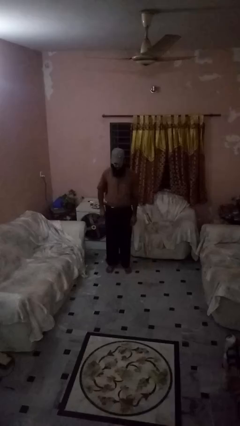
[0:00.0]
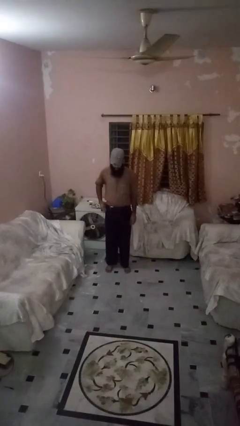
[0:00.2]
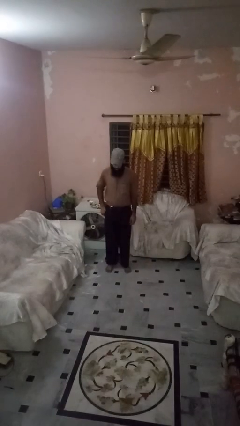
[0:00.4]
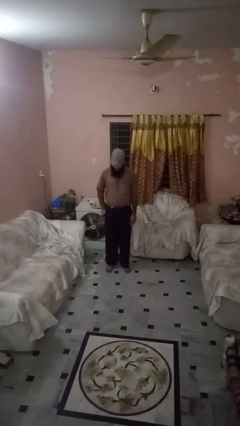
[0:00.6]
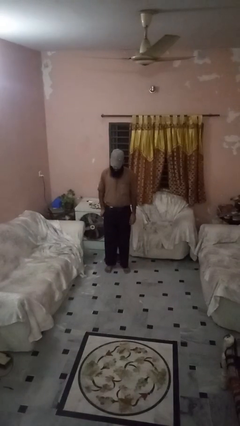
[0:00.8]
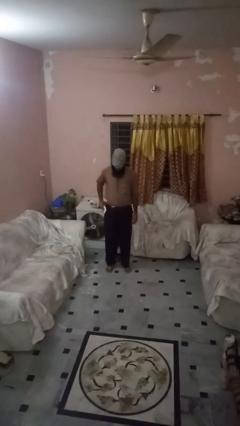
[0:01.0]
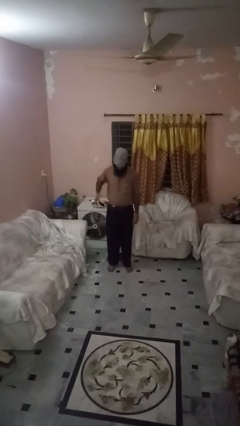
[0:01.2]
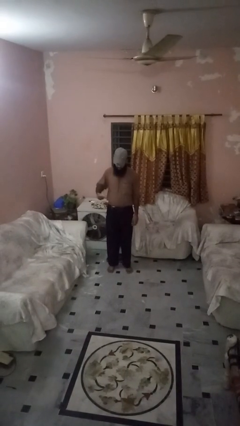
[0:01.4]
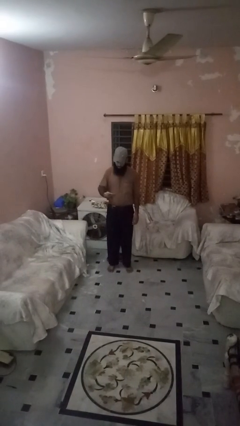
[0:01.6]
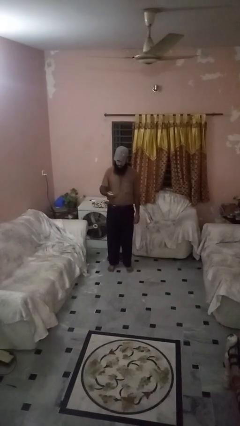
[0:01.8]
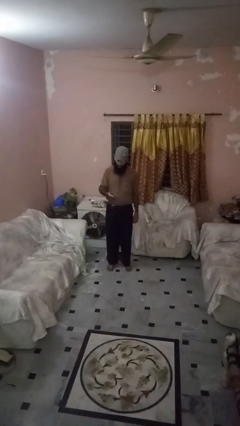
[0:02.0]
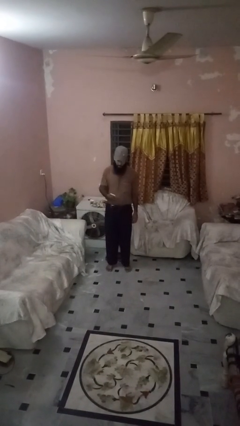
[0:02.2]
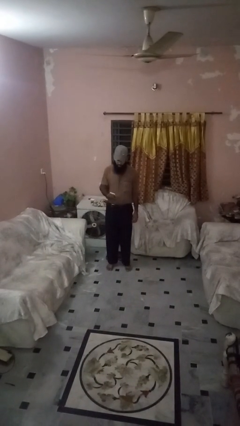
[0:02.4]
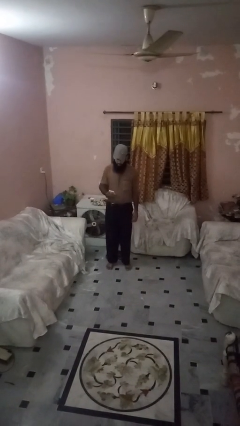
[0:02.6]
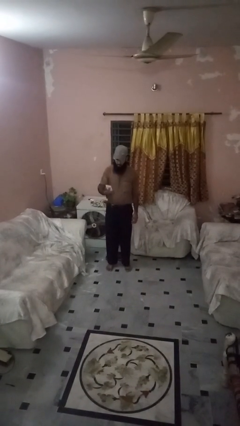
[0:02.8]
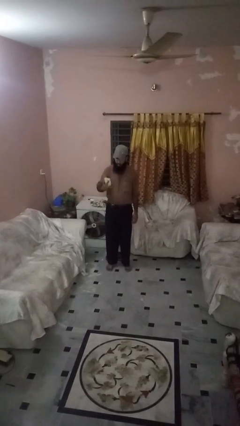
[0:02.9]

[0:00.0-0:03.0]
person takes phone from pocket

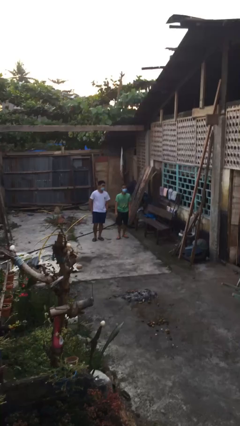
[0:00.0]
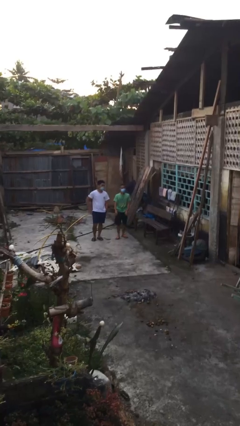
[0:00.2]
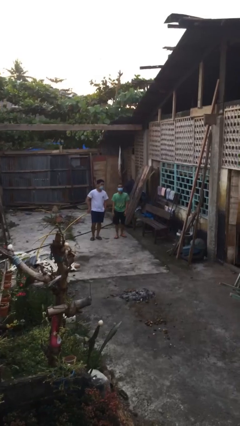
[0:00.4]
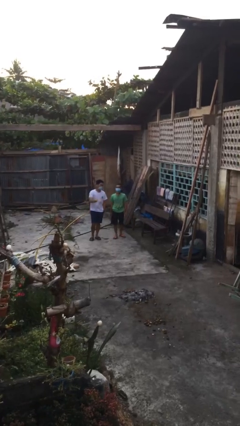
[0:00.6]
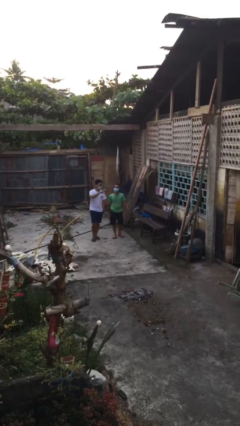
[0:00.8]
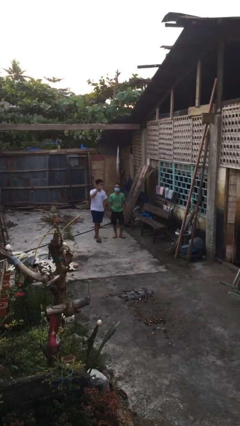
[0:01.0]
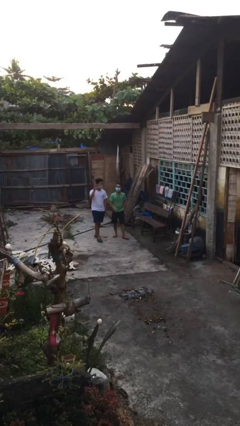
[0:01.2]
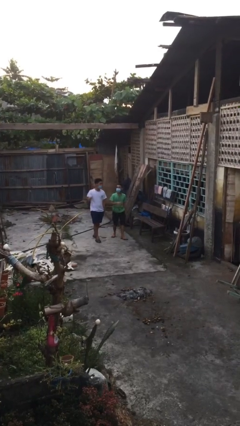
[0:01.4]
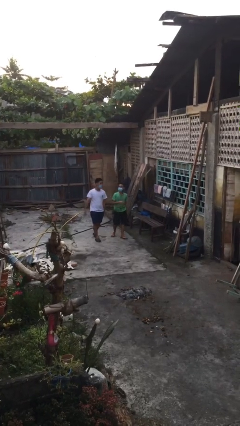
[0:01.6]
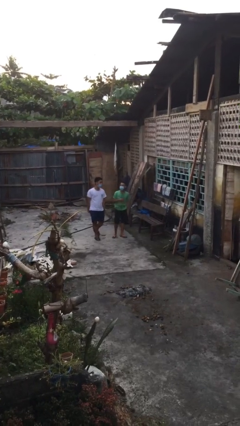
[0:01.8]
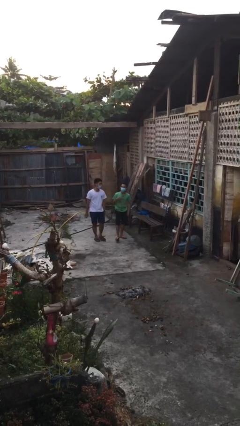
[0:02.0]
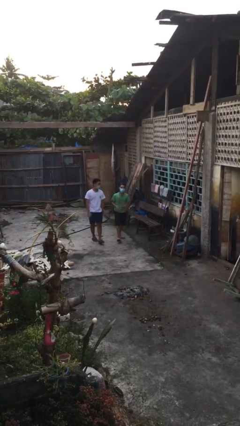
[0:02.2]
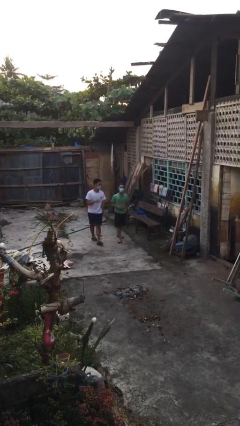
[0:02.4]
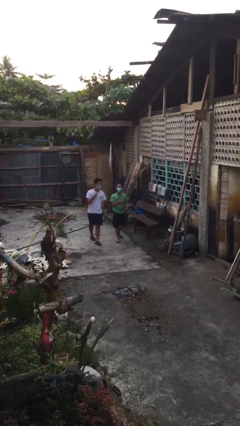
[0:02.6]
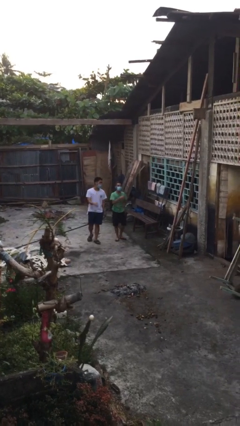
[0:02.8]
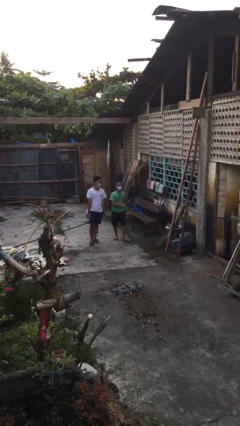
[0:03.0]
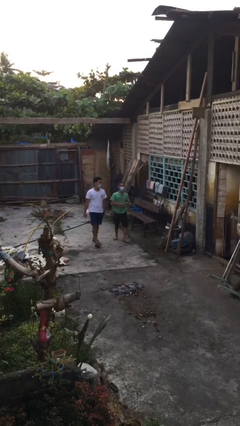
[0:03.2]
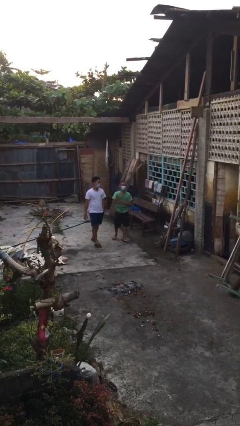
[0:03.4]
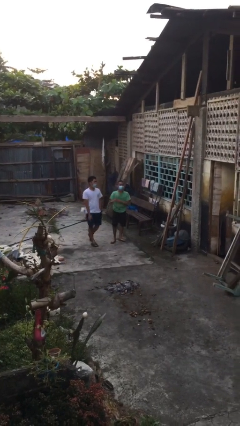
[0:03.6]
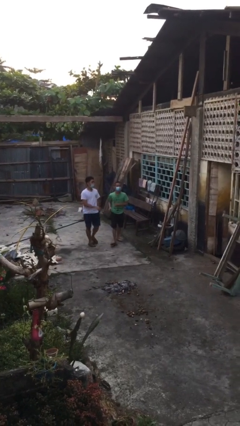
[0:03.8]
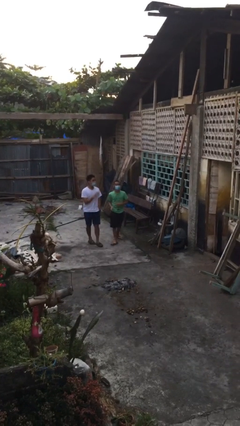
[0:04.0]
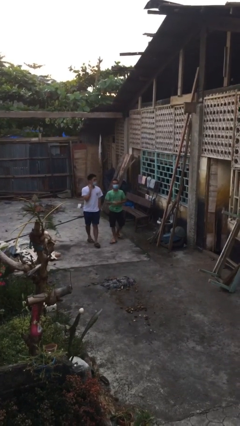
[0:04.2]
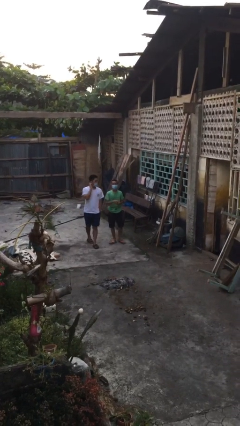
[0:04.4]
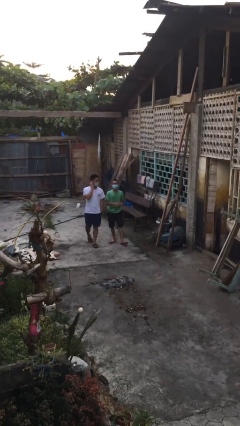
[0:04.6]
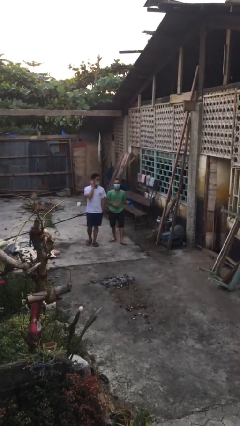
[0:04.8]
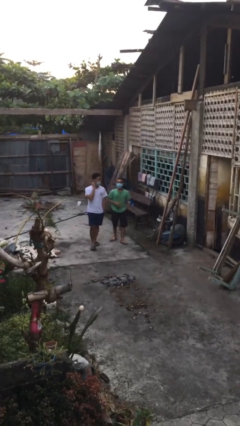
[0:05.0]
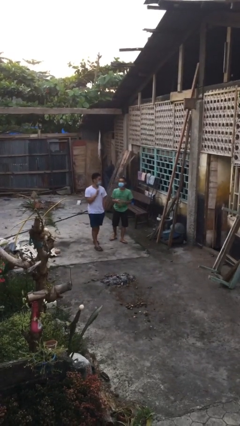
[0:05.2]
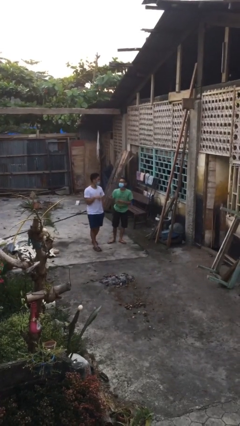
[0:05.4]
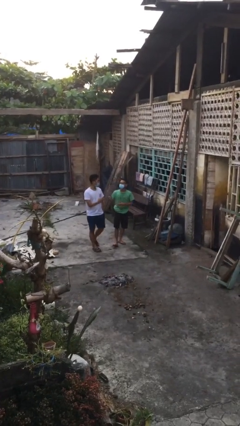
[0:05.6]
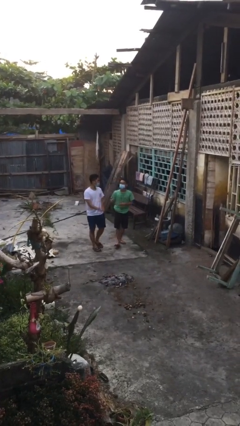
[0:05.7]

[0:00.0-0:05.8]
person talks to person

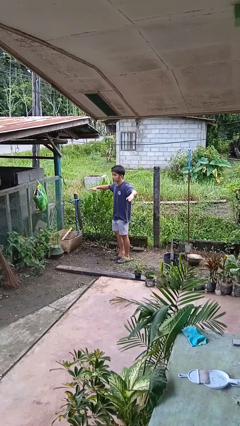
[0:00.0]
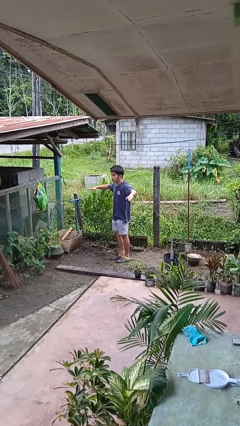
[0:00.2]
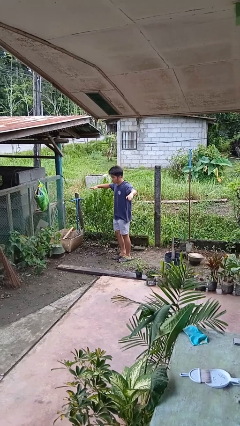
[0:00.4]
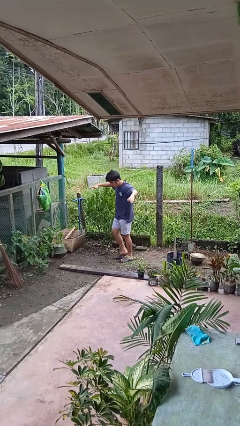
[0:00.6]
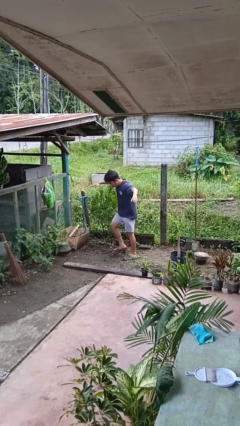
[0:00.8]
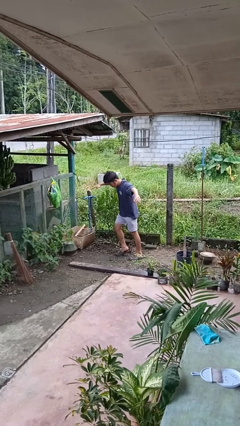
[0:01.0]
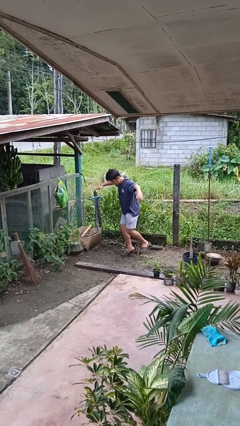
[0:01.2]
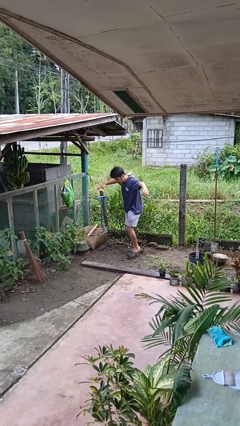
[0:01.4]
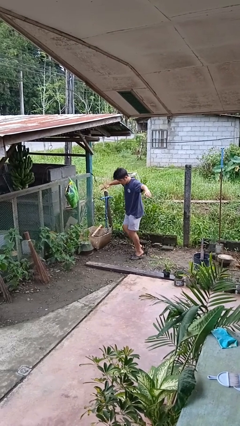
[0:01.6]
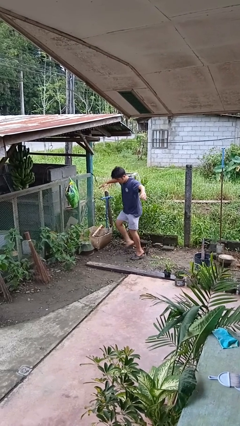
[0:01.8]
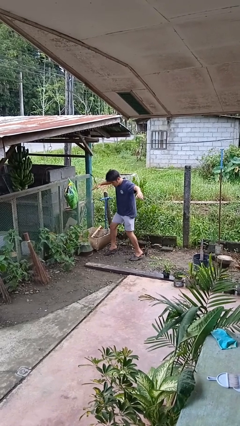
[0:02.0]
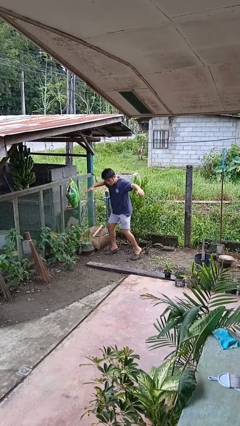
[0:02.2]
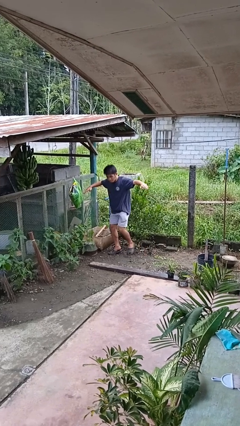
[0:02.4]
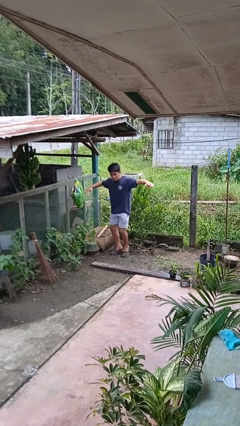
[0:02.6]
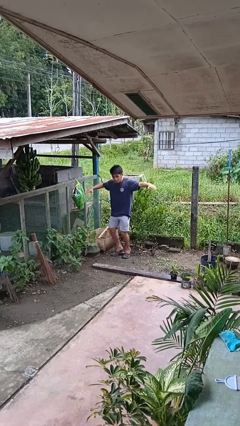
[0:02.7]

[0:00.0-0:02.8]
person walks tiptoe

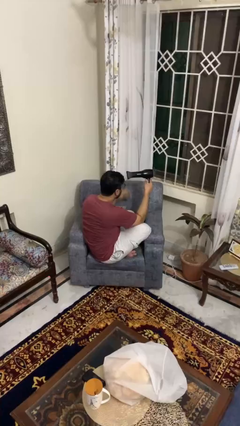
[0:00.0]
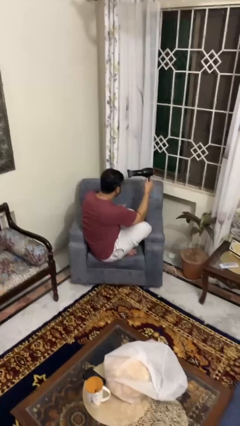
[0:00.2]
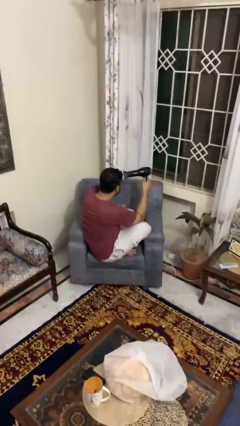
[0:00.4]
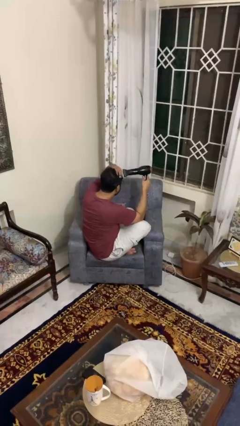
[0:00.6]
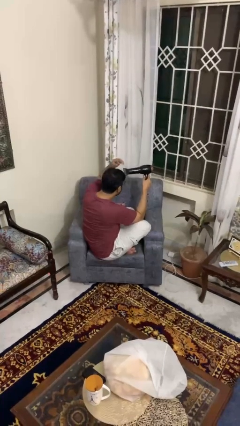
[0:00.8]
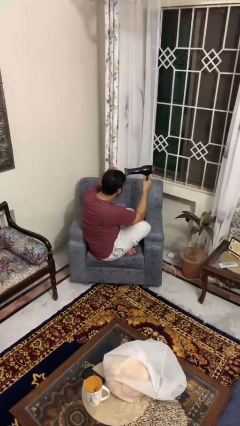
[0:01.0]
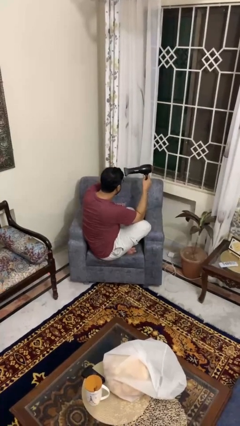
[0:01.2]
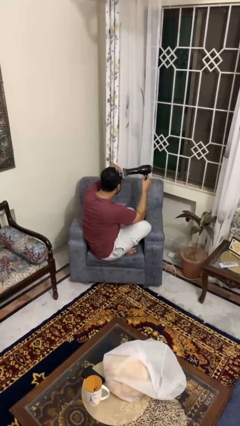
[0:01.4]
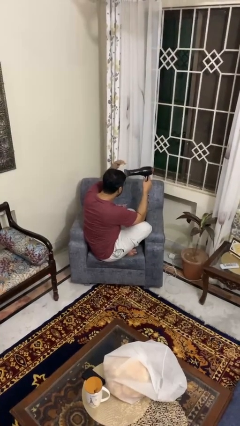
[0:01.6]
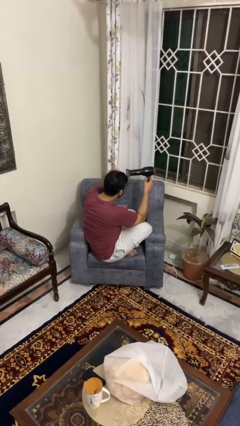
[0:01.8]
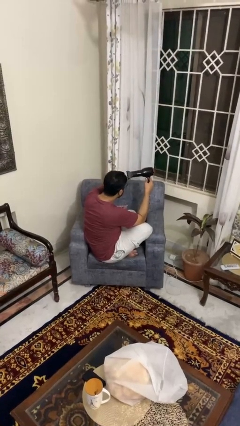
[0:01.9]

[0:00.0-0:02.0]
person dries hair with hairdryer

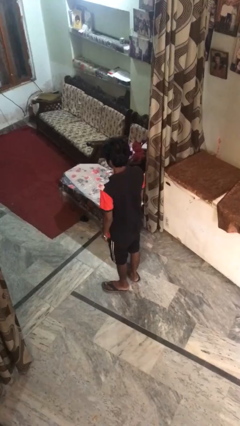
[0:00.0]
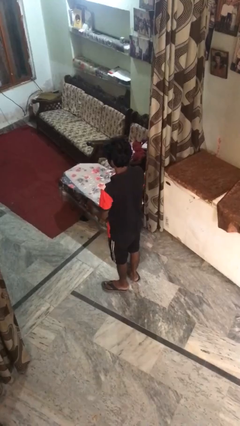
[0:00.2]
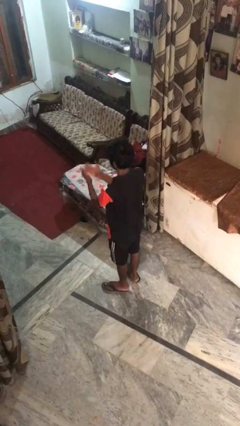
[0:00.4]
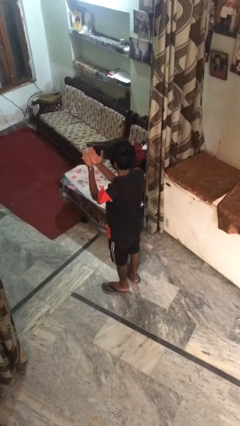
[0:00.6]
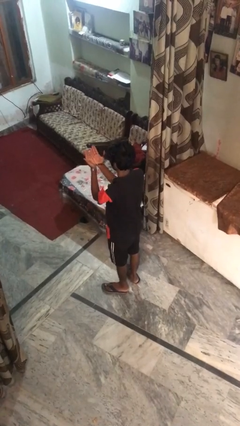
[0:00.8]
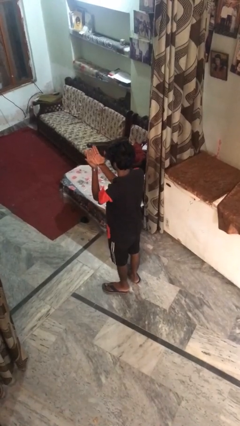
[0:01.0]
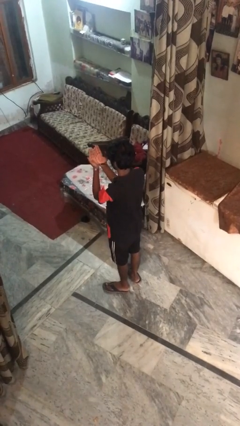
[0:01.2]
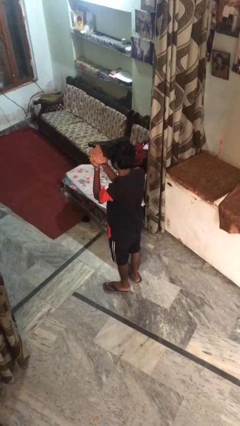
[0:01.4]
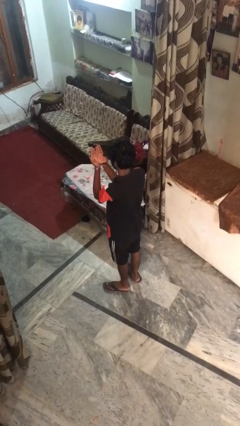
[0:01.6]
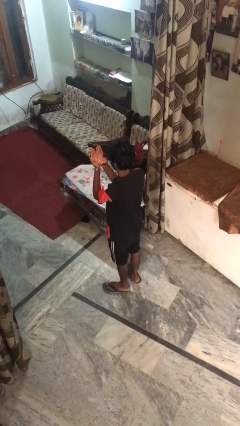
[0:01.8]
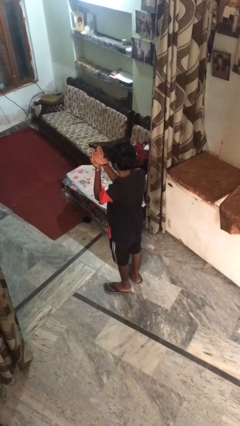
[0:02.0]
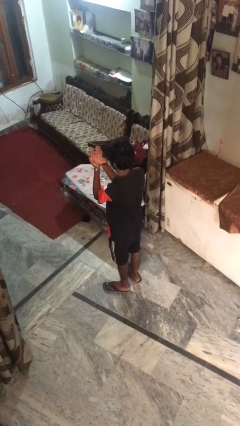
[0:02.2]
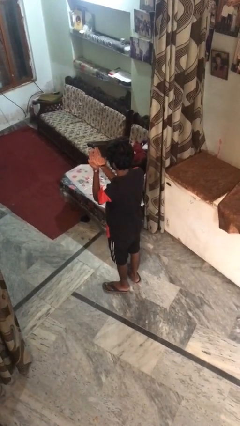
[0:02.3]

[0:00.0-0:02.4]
person prays

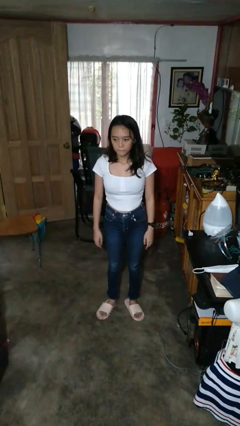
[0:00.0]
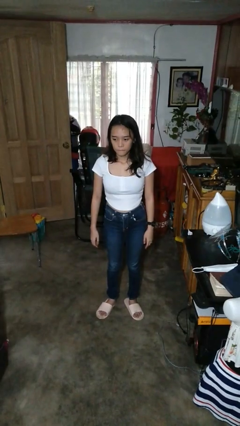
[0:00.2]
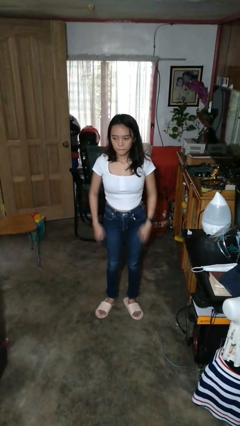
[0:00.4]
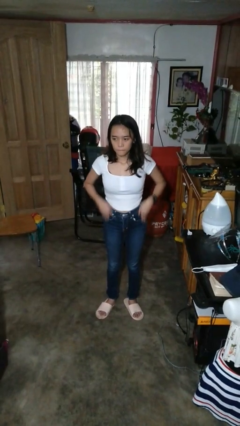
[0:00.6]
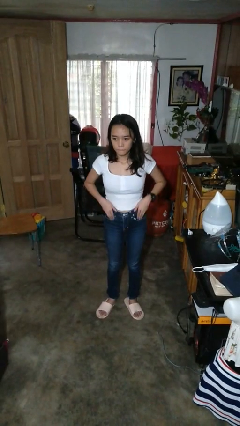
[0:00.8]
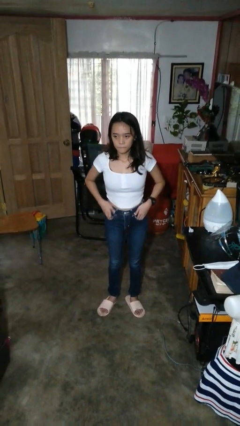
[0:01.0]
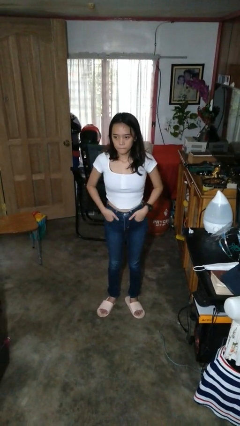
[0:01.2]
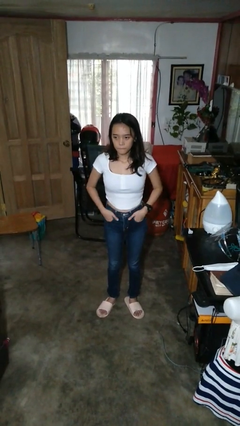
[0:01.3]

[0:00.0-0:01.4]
person puts hands in back pockets
